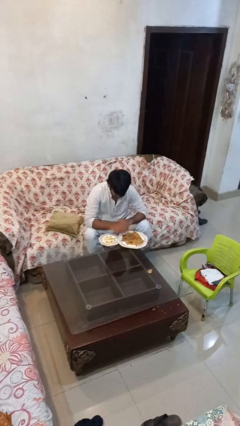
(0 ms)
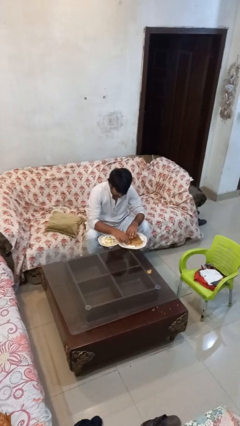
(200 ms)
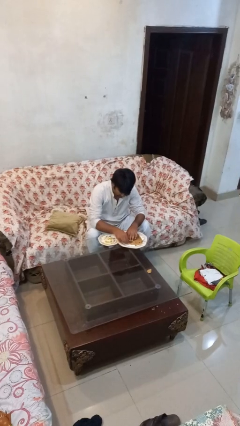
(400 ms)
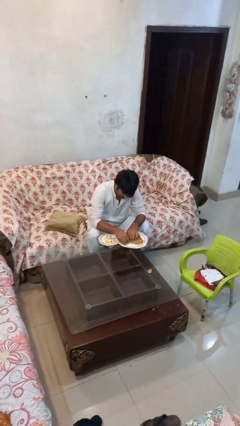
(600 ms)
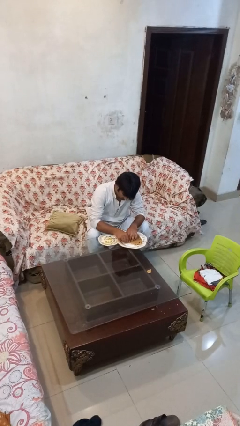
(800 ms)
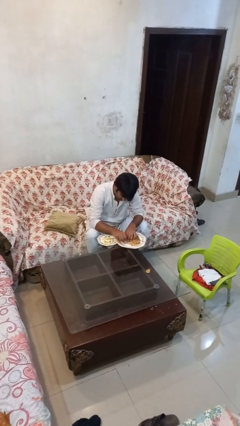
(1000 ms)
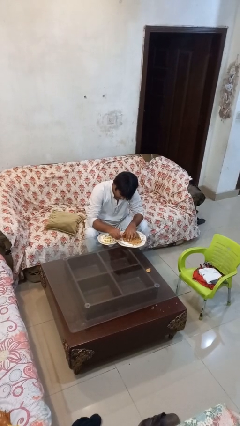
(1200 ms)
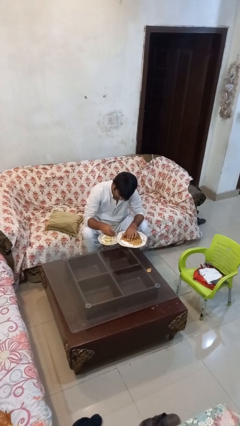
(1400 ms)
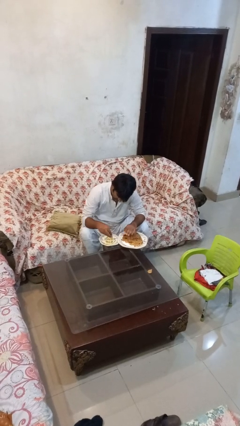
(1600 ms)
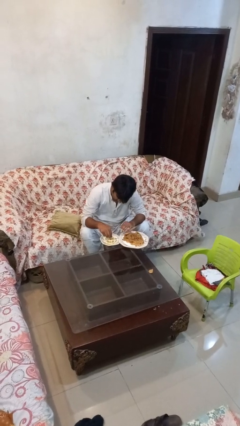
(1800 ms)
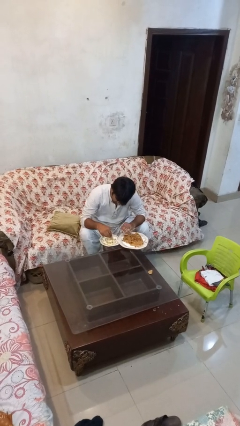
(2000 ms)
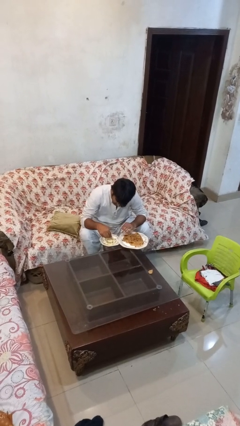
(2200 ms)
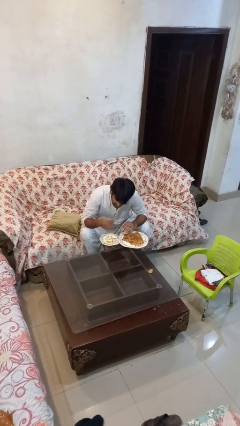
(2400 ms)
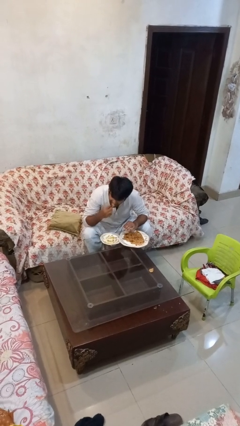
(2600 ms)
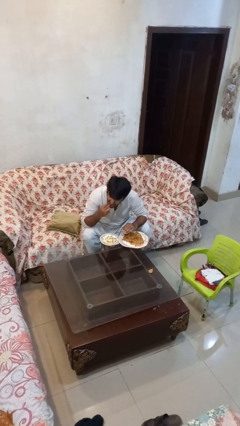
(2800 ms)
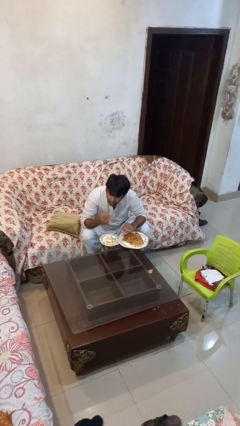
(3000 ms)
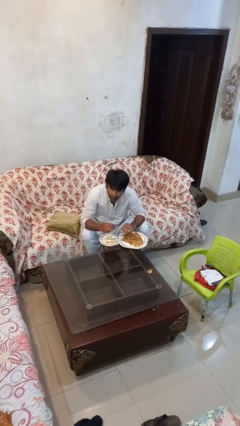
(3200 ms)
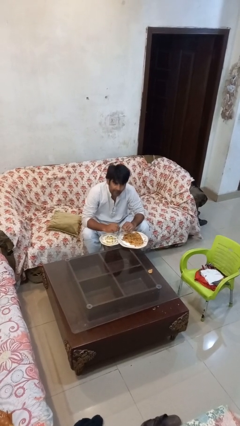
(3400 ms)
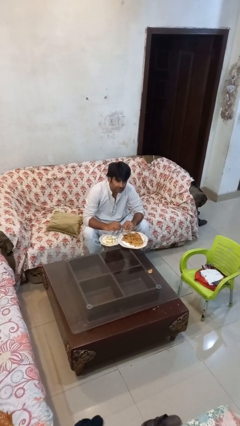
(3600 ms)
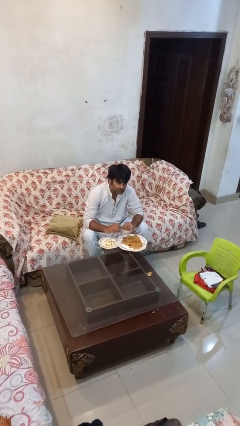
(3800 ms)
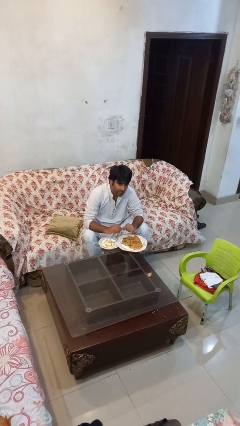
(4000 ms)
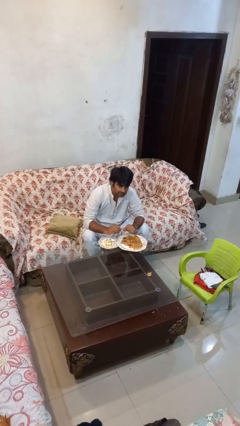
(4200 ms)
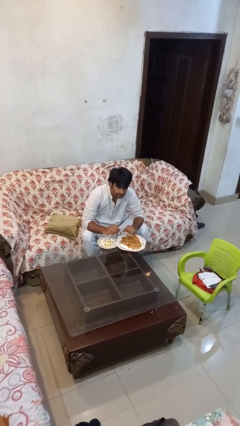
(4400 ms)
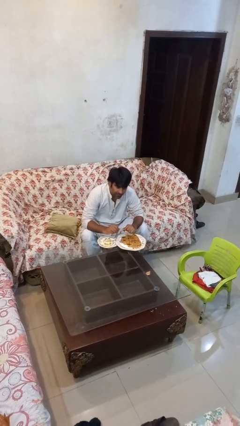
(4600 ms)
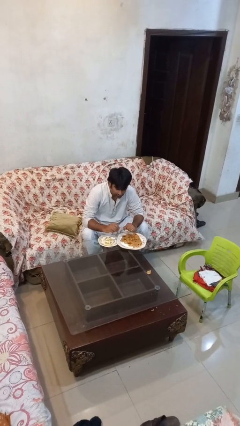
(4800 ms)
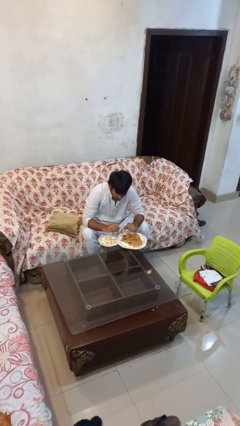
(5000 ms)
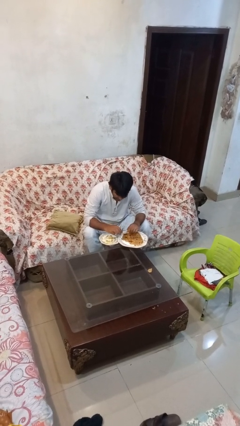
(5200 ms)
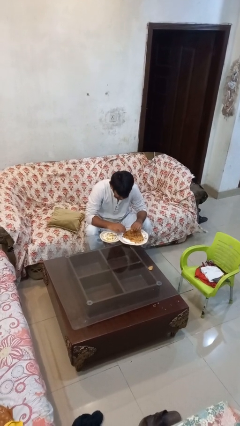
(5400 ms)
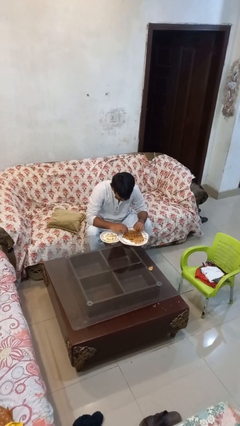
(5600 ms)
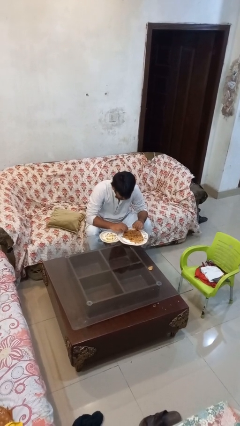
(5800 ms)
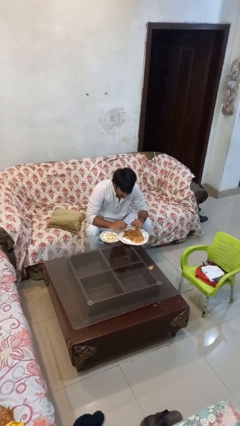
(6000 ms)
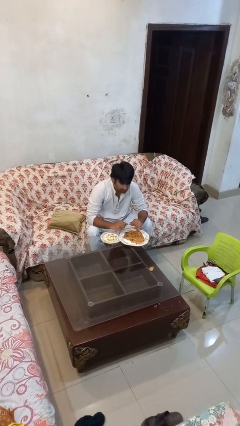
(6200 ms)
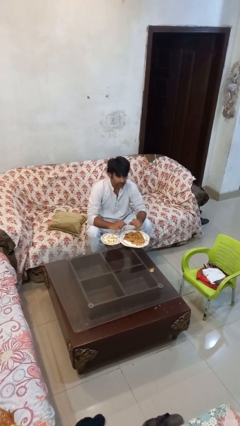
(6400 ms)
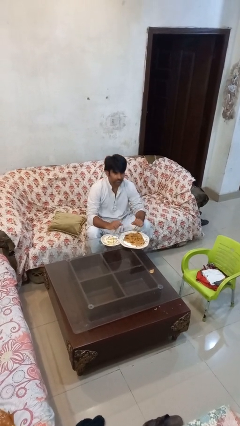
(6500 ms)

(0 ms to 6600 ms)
person eats with hands

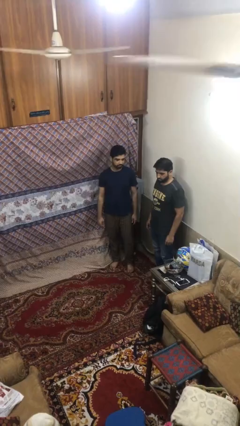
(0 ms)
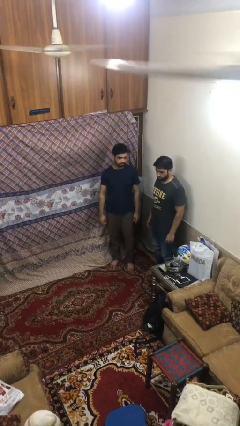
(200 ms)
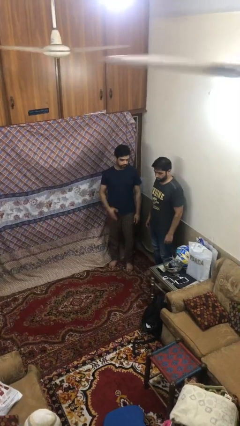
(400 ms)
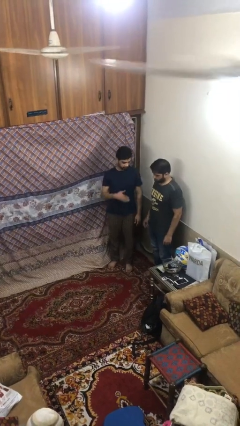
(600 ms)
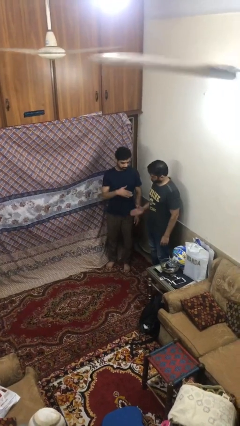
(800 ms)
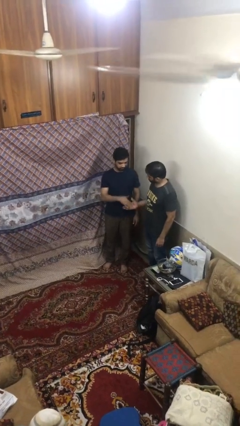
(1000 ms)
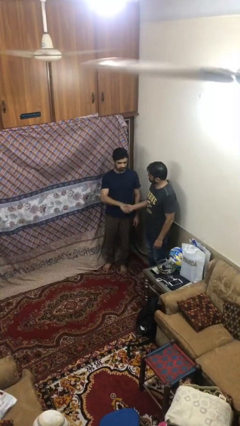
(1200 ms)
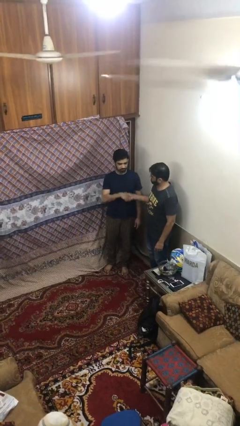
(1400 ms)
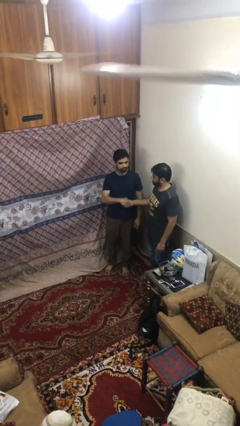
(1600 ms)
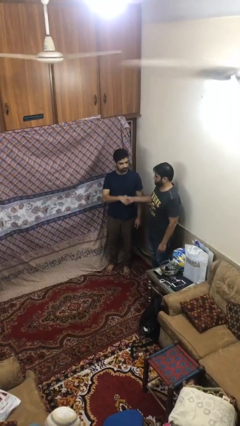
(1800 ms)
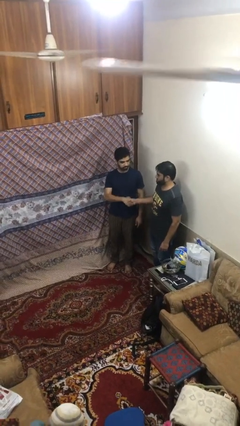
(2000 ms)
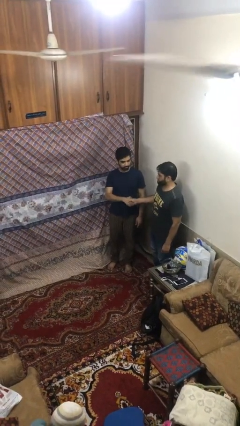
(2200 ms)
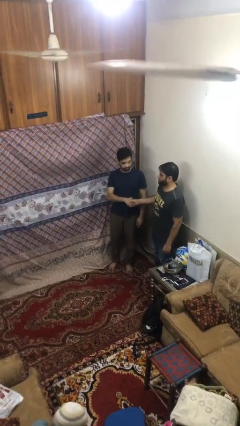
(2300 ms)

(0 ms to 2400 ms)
person shakes hand

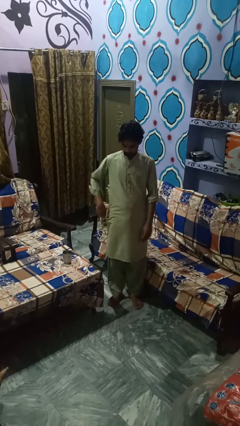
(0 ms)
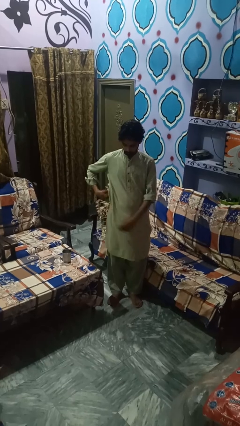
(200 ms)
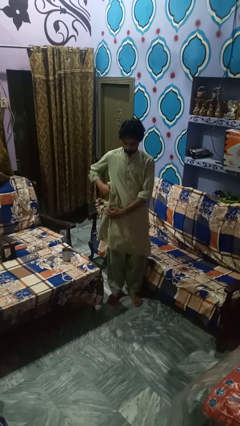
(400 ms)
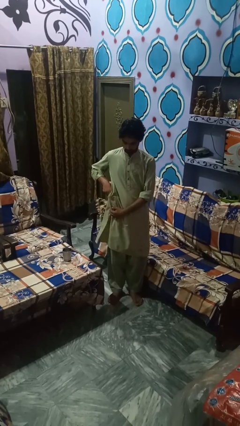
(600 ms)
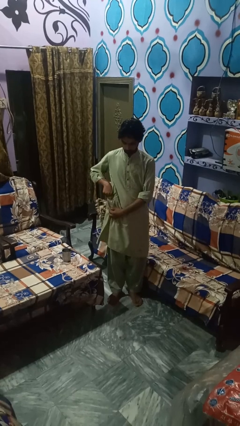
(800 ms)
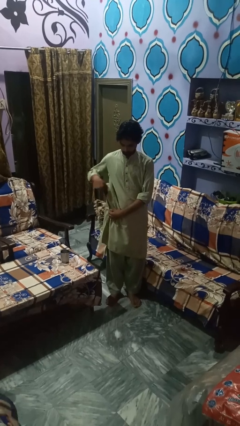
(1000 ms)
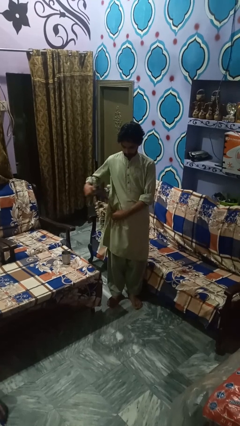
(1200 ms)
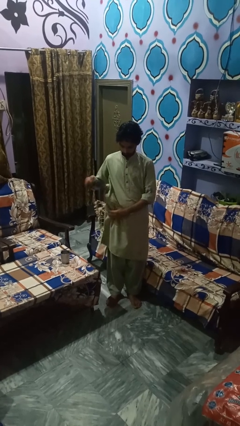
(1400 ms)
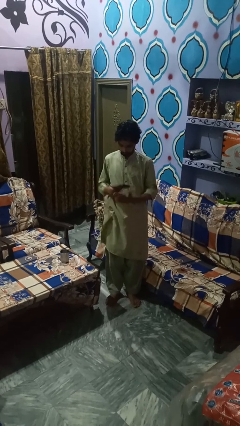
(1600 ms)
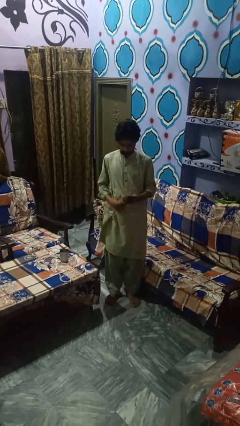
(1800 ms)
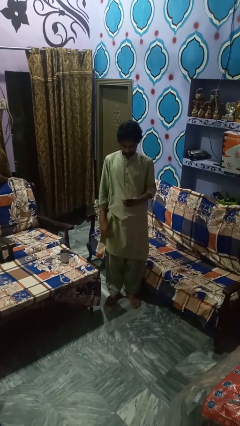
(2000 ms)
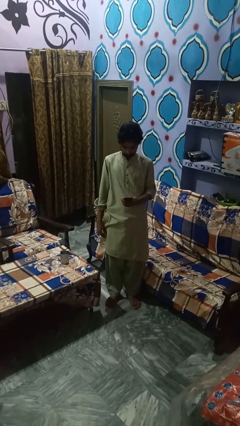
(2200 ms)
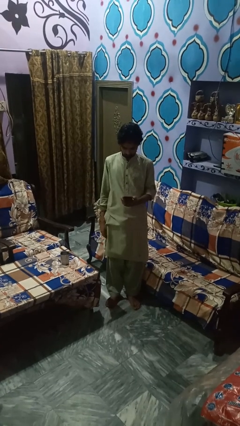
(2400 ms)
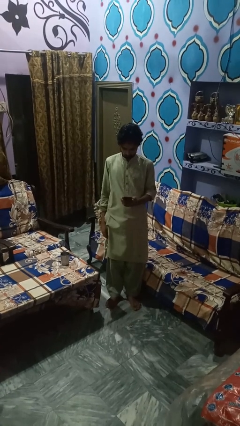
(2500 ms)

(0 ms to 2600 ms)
person takes phone from pocket

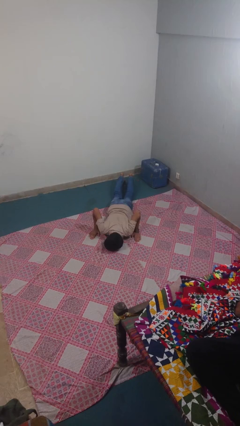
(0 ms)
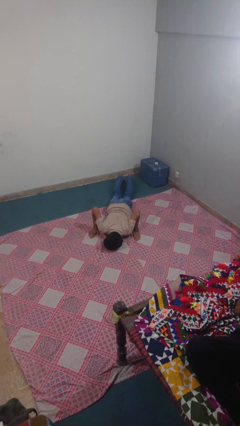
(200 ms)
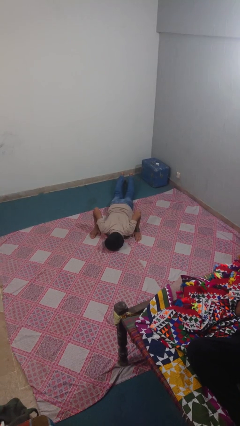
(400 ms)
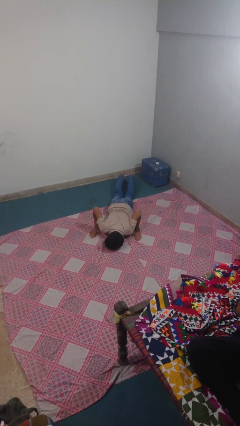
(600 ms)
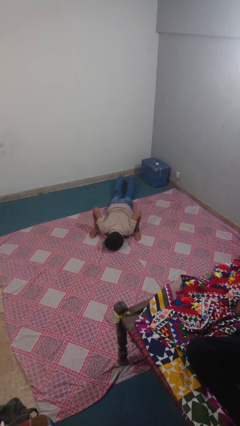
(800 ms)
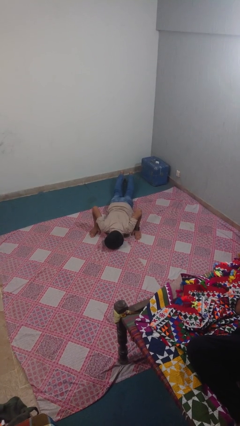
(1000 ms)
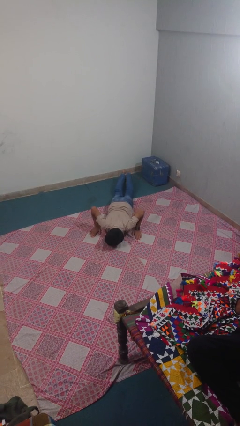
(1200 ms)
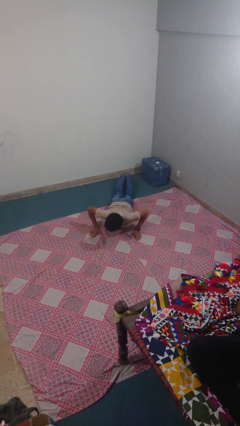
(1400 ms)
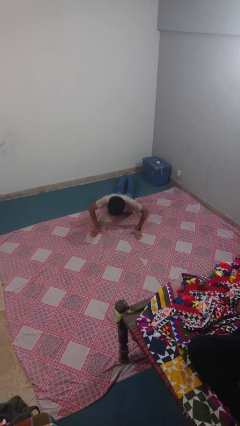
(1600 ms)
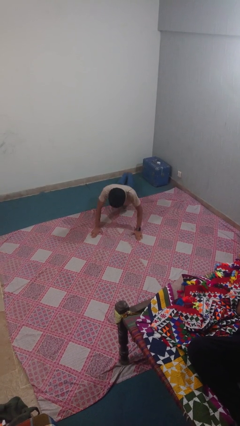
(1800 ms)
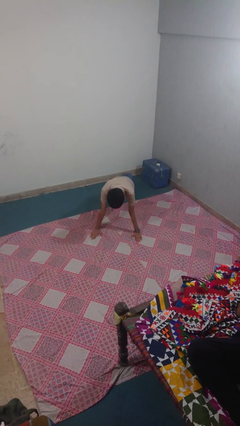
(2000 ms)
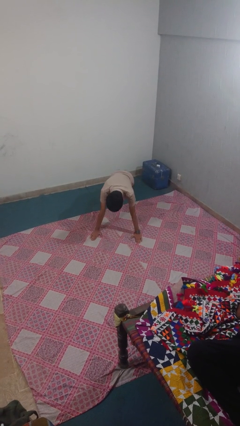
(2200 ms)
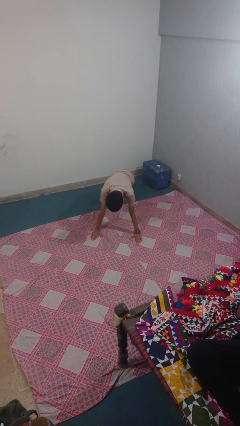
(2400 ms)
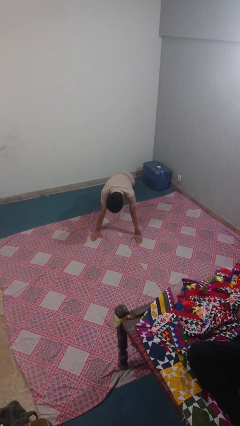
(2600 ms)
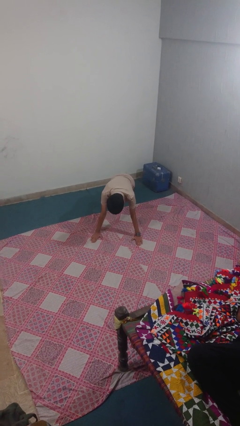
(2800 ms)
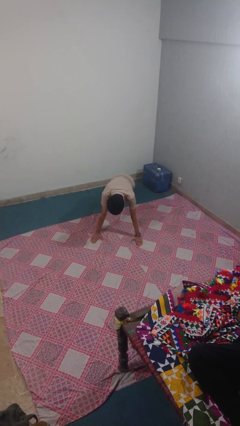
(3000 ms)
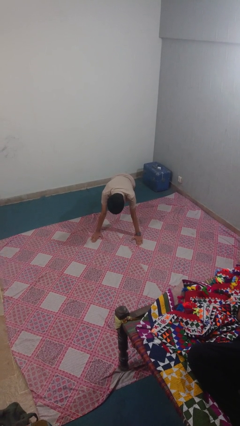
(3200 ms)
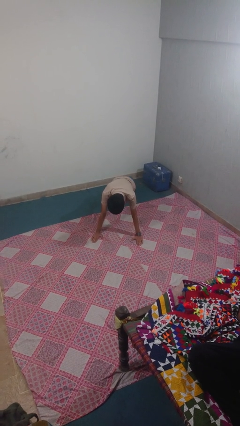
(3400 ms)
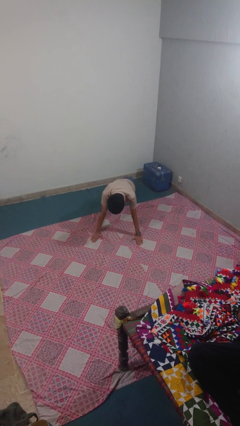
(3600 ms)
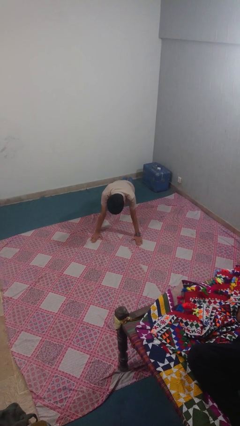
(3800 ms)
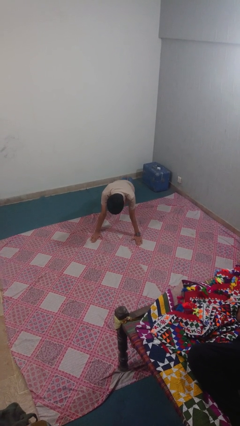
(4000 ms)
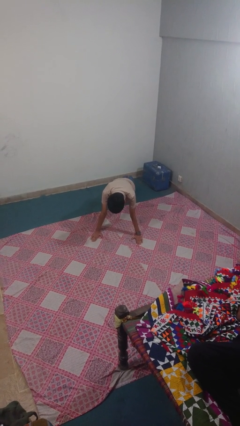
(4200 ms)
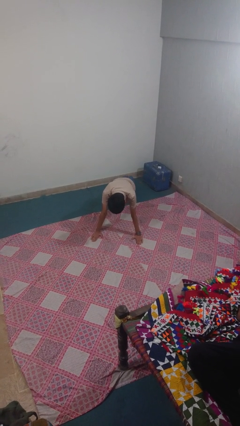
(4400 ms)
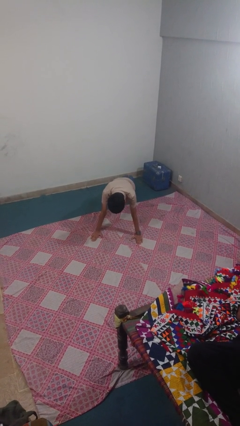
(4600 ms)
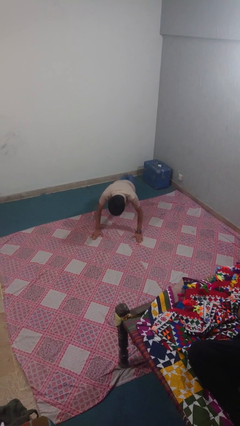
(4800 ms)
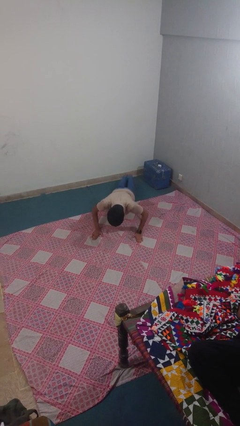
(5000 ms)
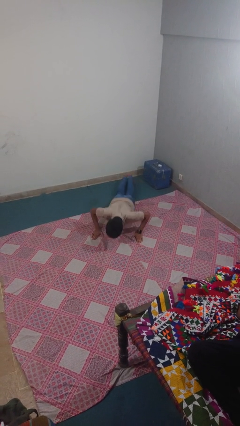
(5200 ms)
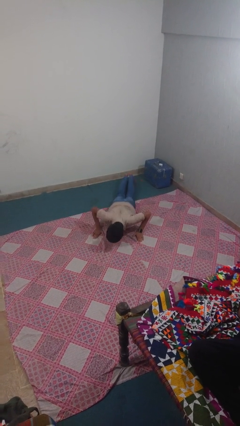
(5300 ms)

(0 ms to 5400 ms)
person exercises with pushup

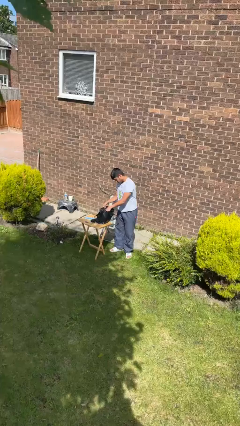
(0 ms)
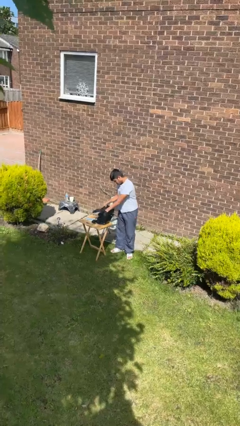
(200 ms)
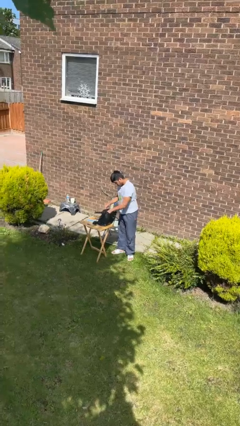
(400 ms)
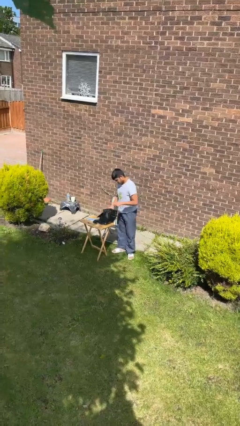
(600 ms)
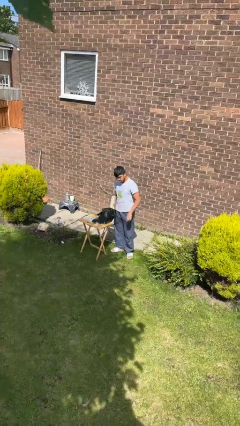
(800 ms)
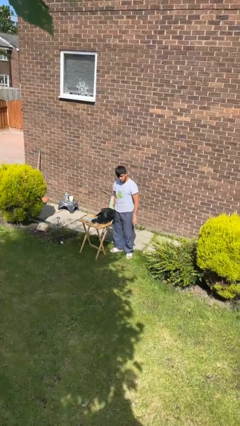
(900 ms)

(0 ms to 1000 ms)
person puts object into backpack
